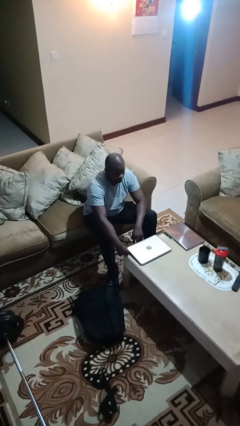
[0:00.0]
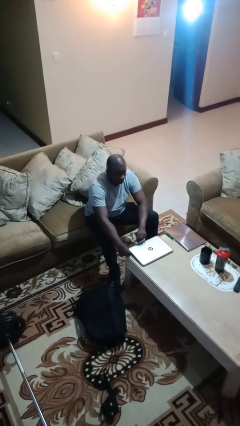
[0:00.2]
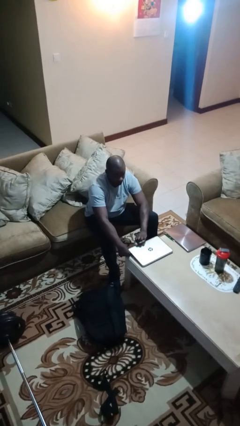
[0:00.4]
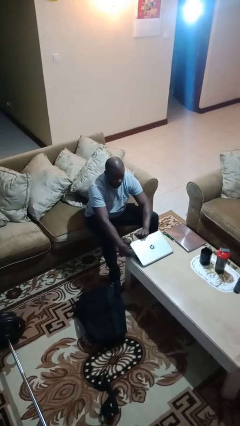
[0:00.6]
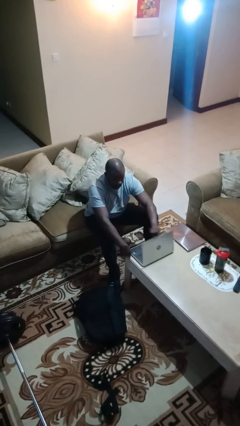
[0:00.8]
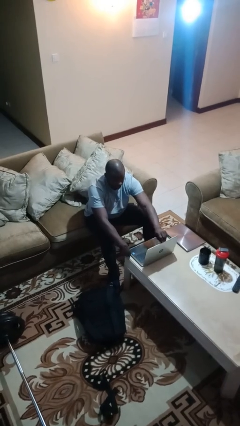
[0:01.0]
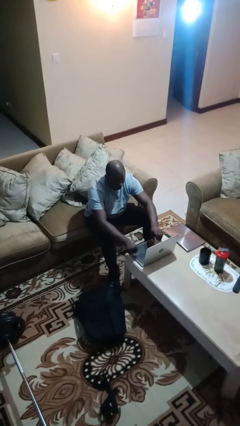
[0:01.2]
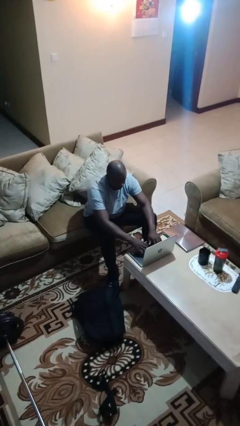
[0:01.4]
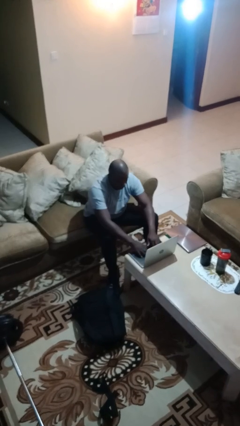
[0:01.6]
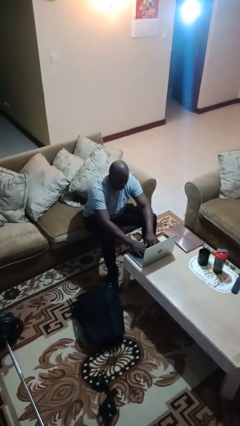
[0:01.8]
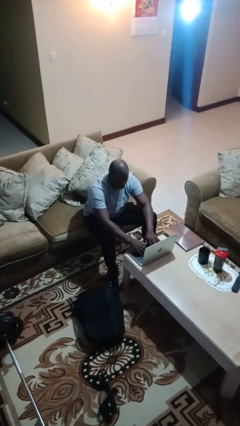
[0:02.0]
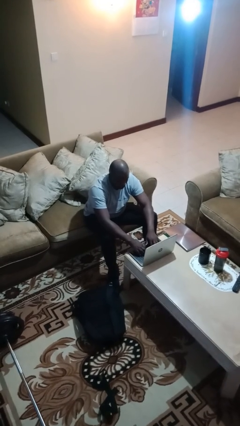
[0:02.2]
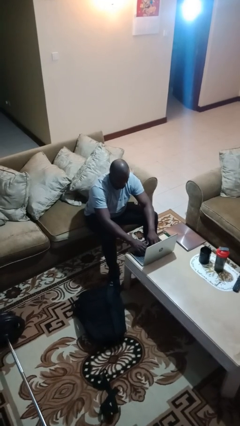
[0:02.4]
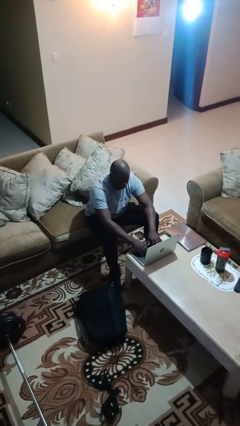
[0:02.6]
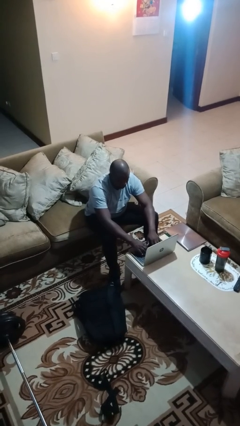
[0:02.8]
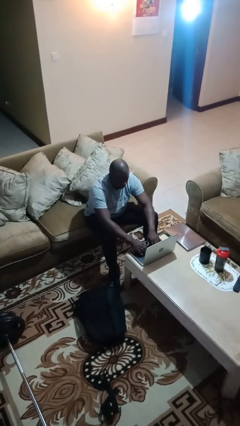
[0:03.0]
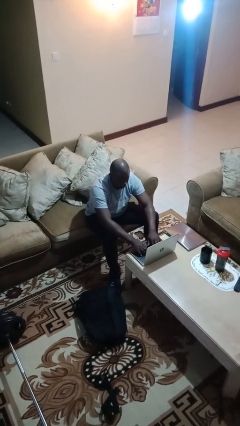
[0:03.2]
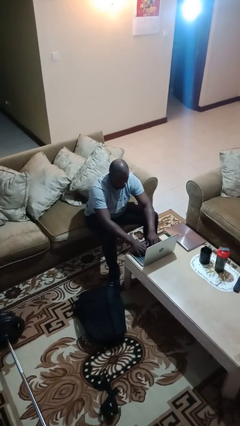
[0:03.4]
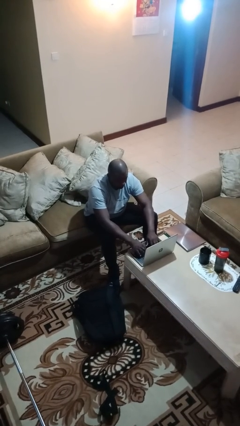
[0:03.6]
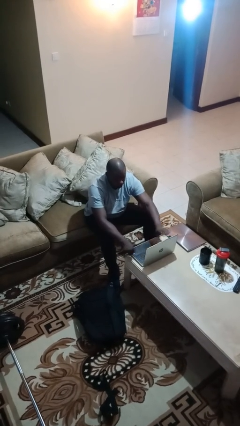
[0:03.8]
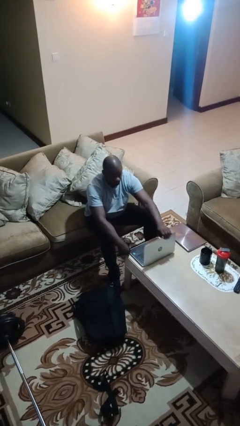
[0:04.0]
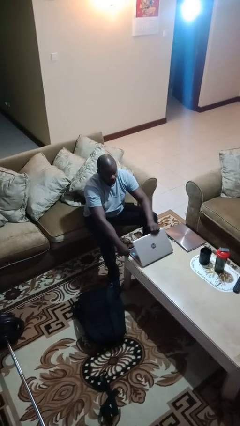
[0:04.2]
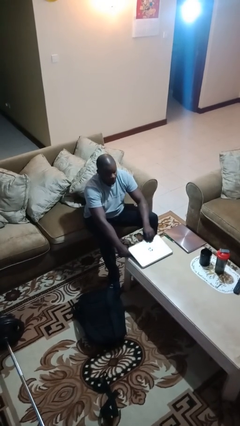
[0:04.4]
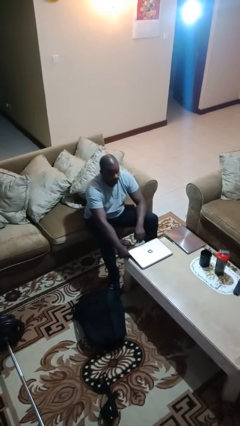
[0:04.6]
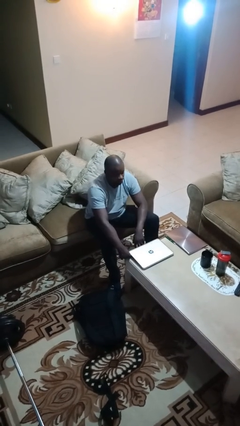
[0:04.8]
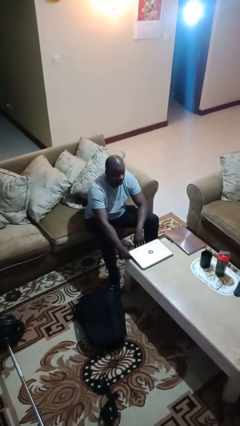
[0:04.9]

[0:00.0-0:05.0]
person interacts with laptop

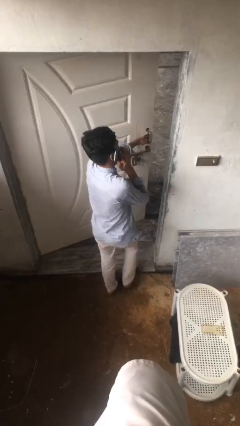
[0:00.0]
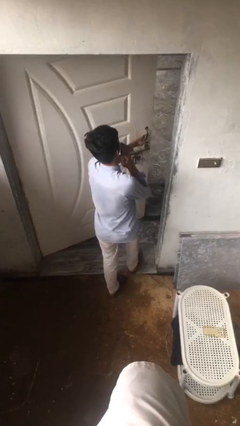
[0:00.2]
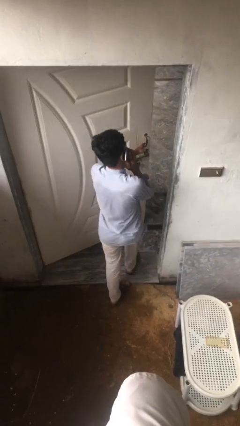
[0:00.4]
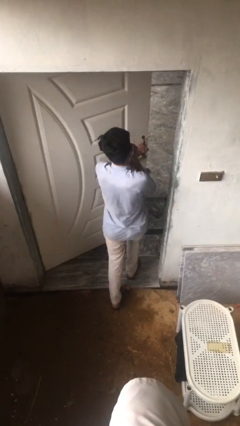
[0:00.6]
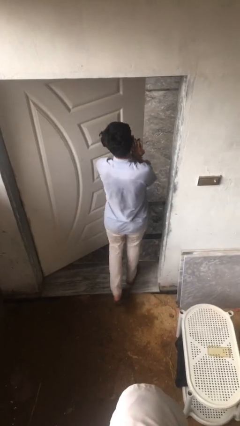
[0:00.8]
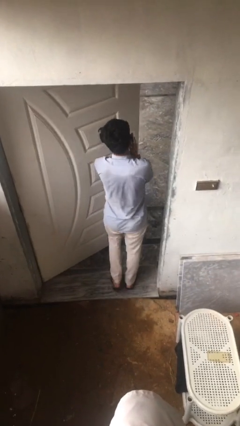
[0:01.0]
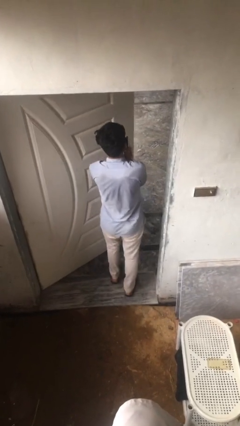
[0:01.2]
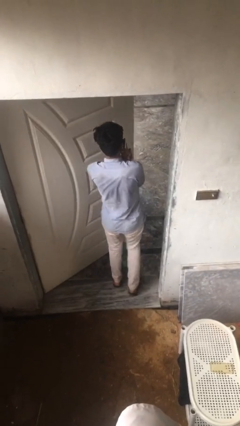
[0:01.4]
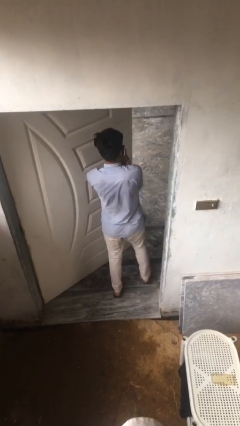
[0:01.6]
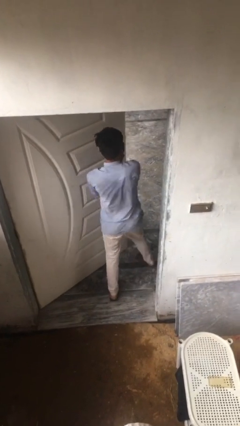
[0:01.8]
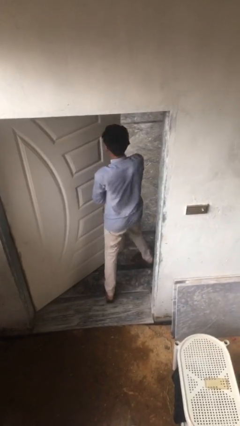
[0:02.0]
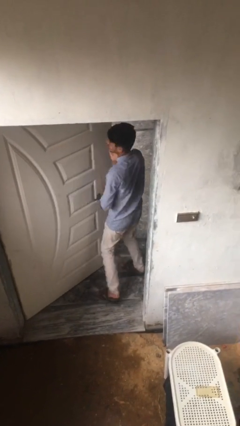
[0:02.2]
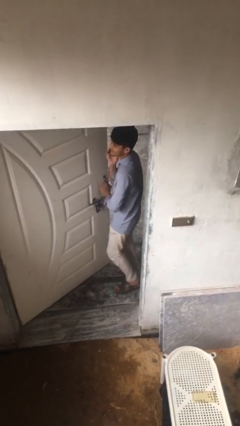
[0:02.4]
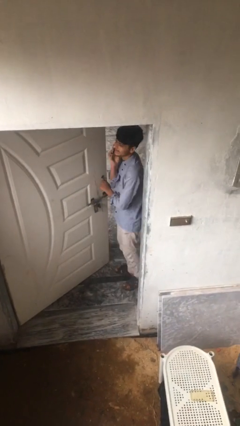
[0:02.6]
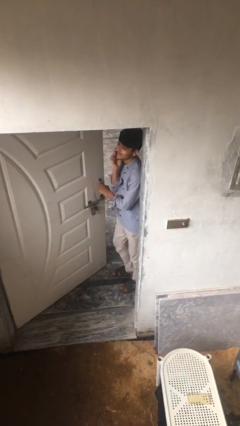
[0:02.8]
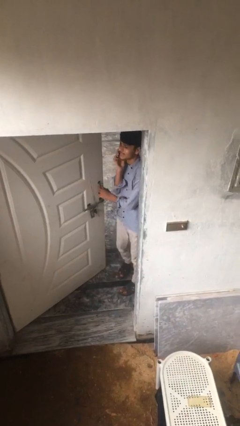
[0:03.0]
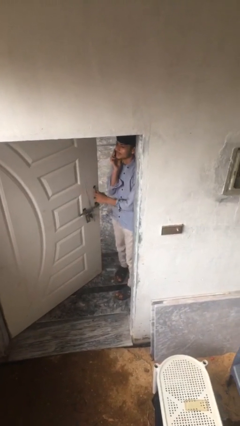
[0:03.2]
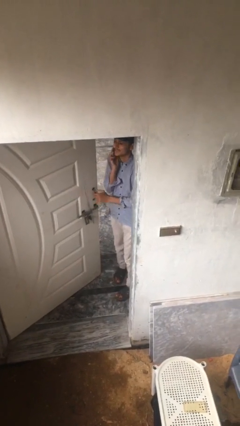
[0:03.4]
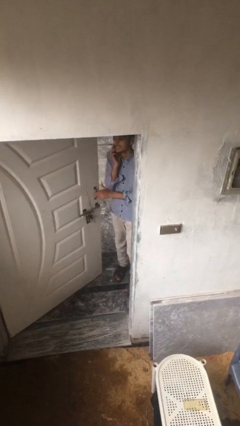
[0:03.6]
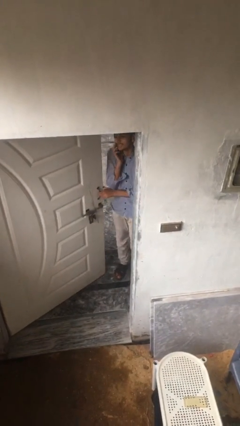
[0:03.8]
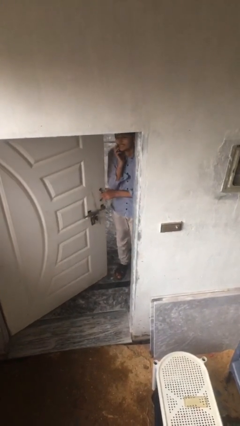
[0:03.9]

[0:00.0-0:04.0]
person exits scene through structure

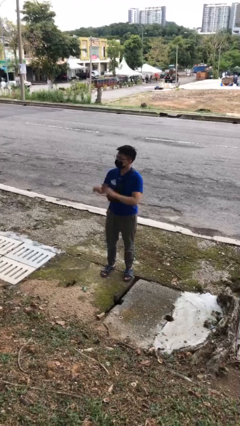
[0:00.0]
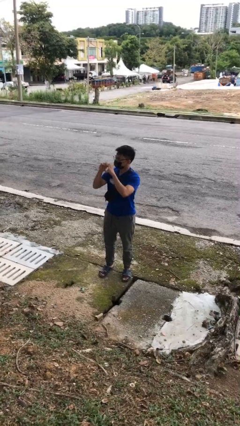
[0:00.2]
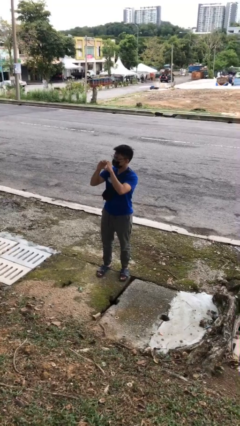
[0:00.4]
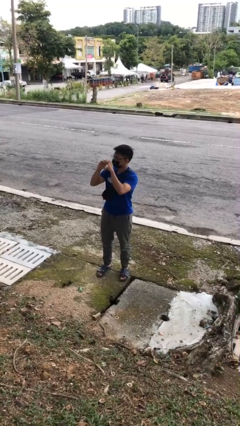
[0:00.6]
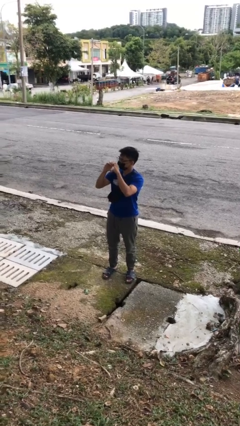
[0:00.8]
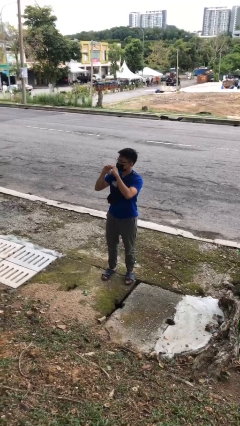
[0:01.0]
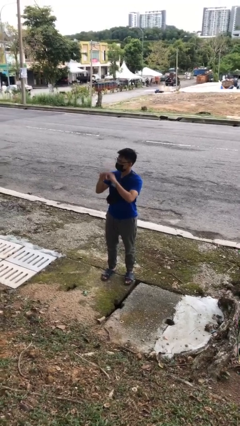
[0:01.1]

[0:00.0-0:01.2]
person gestures heart

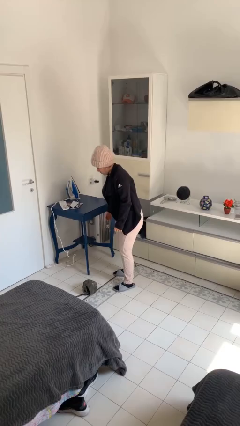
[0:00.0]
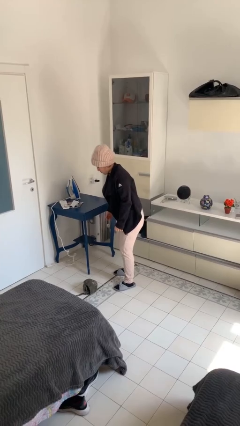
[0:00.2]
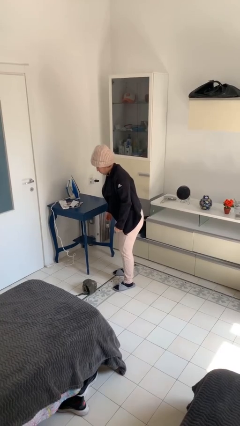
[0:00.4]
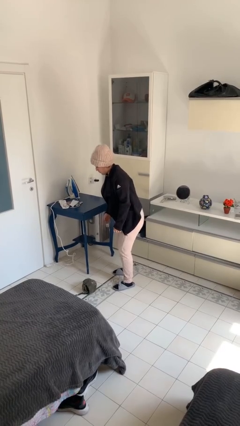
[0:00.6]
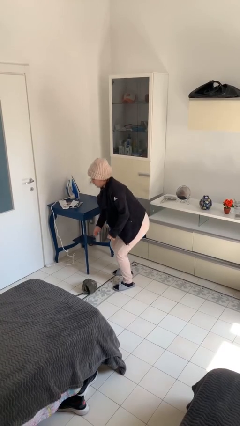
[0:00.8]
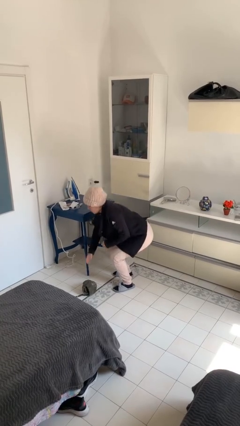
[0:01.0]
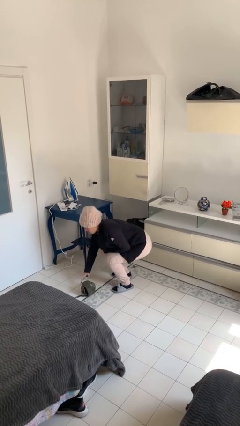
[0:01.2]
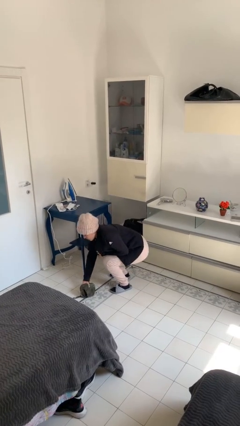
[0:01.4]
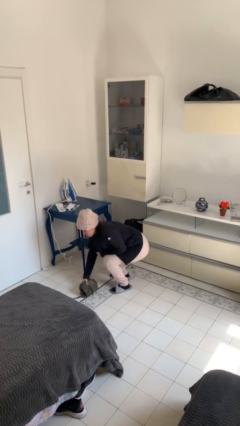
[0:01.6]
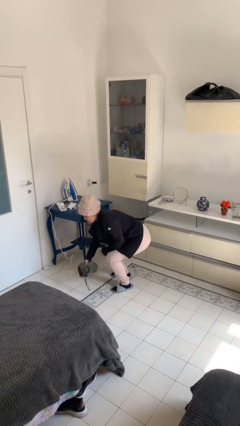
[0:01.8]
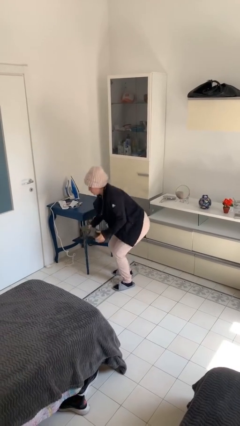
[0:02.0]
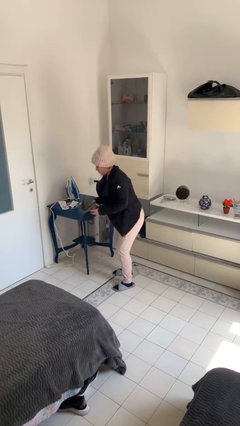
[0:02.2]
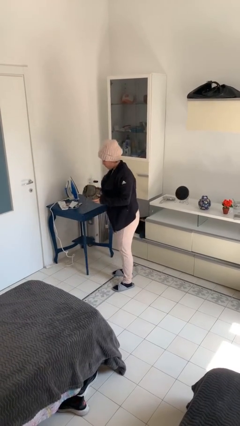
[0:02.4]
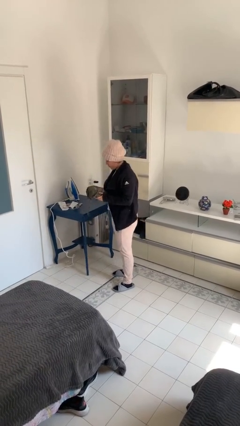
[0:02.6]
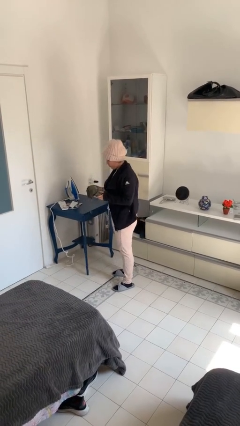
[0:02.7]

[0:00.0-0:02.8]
person picks up object from floor

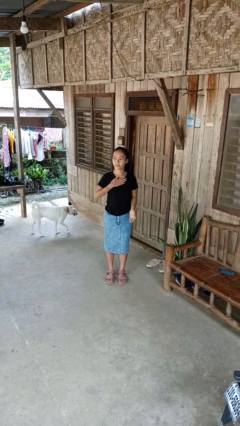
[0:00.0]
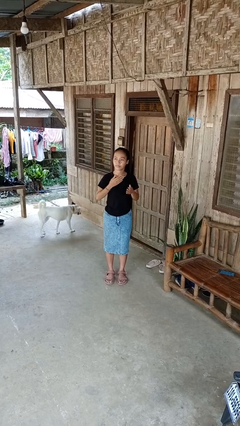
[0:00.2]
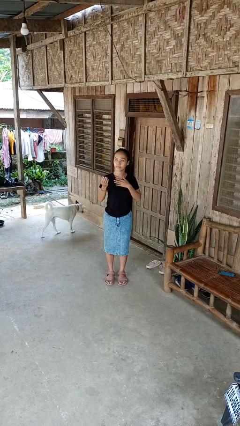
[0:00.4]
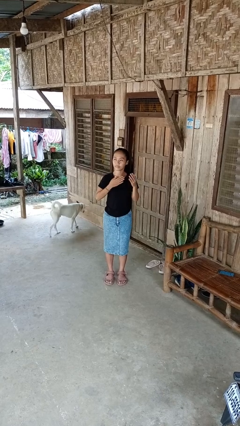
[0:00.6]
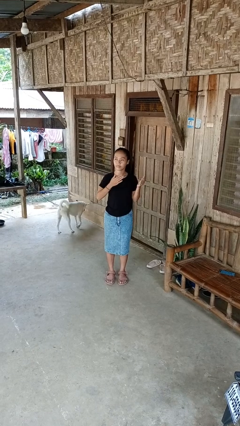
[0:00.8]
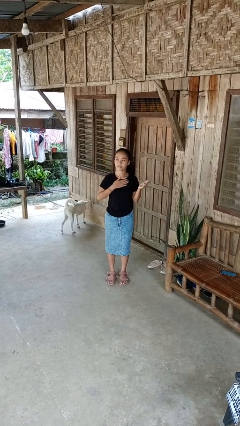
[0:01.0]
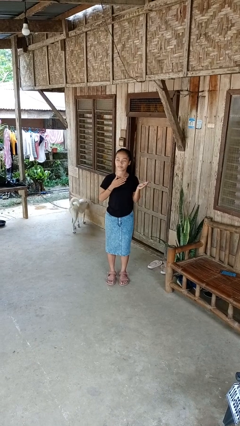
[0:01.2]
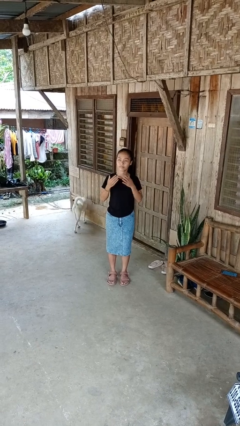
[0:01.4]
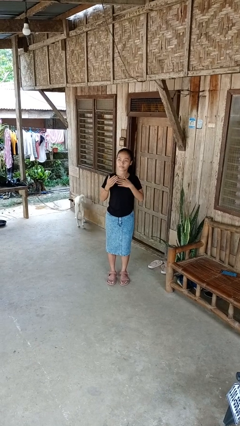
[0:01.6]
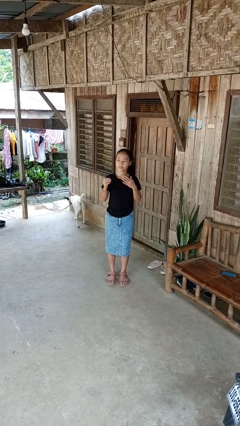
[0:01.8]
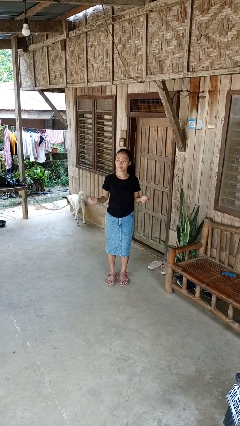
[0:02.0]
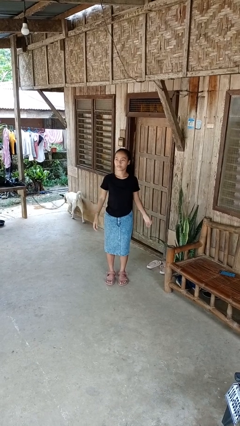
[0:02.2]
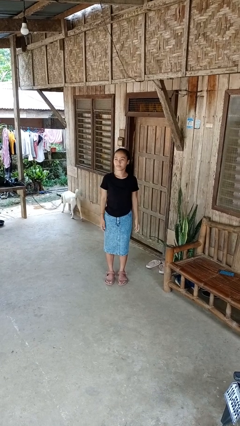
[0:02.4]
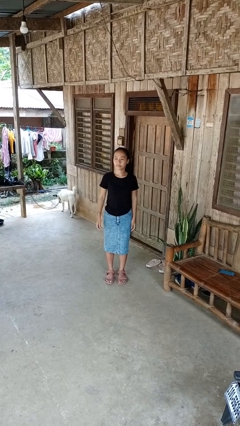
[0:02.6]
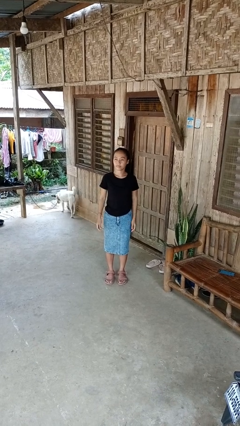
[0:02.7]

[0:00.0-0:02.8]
person drums on chest

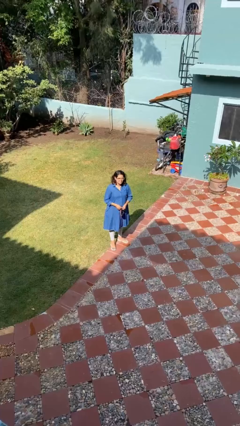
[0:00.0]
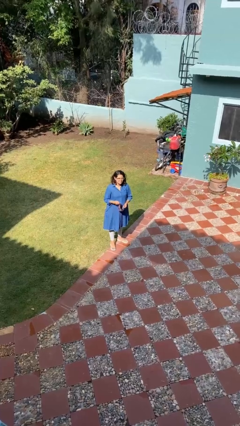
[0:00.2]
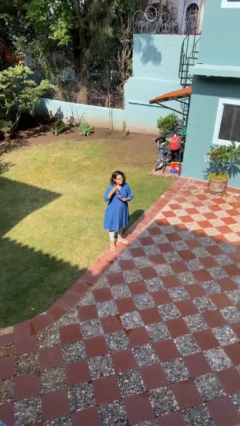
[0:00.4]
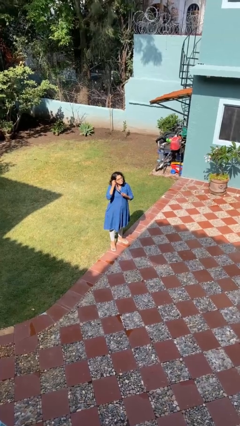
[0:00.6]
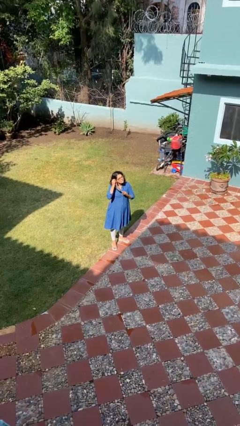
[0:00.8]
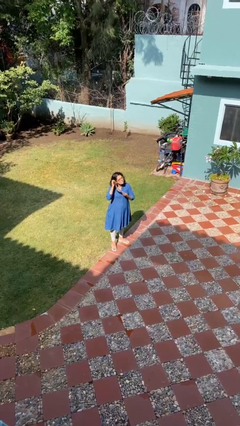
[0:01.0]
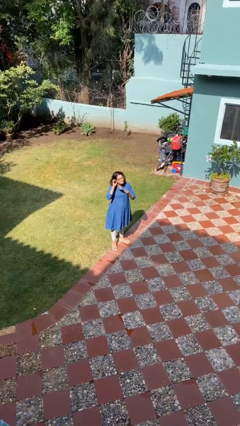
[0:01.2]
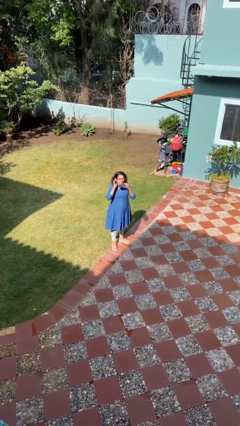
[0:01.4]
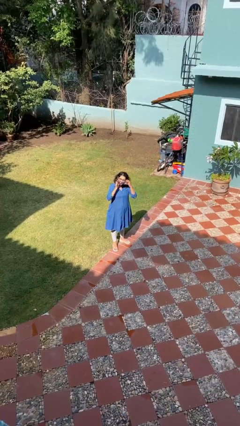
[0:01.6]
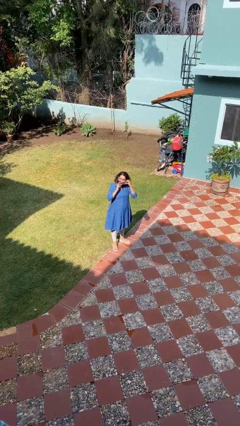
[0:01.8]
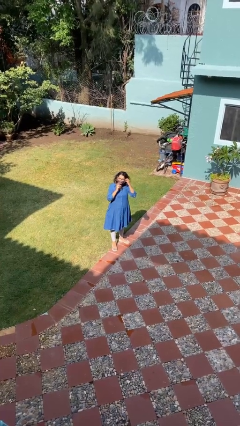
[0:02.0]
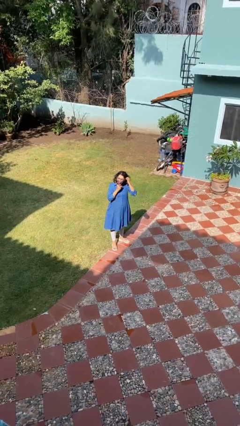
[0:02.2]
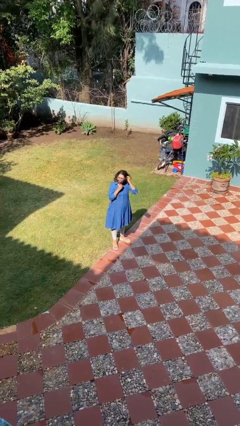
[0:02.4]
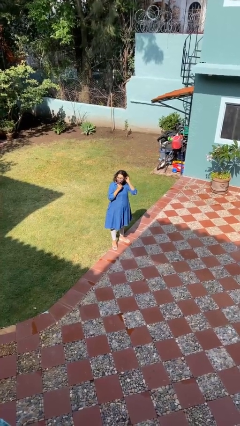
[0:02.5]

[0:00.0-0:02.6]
person puts on facemask
